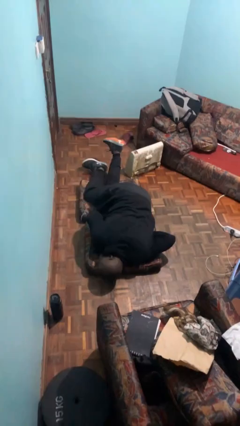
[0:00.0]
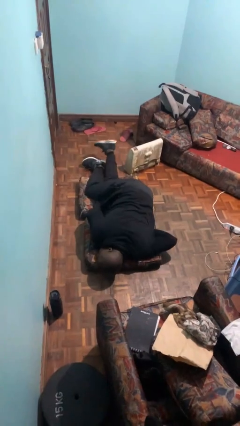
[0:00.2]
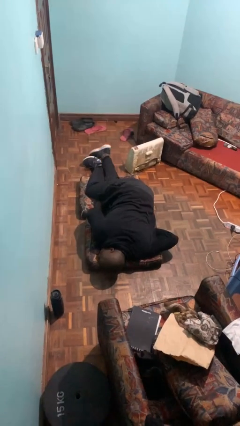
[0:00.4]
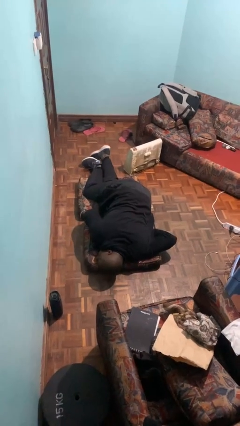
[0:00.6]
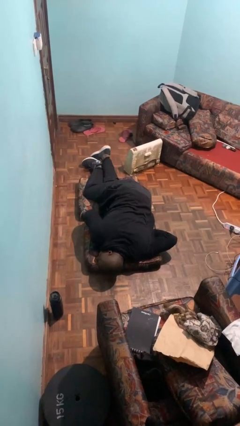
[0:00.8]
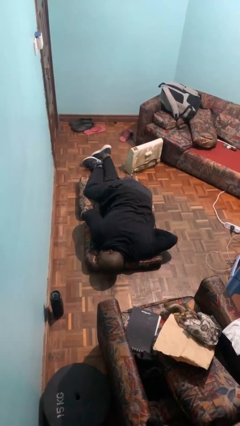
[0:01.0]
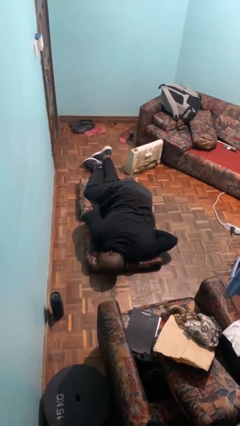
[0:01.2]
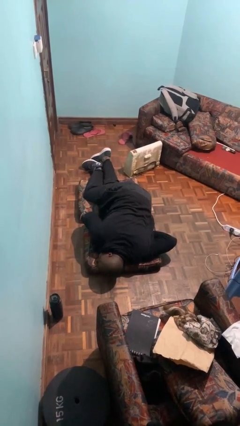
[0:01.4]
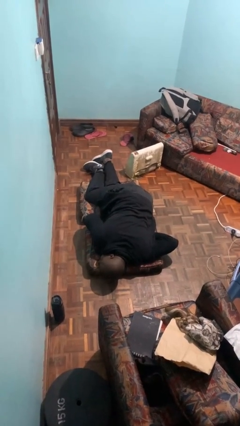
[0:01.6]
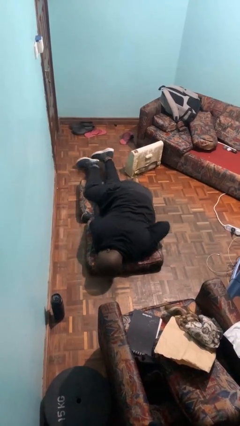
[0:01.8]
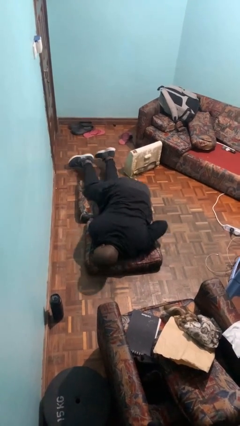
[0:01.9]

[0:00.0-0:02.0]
person lies down on floor

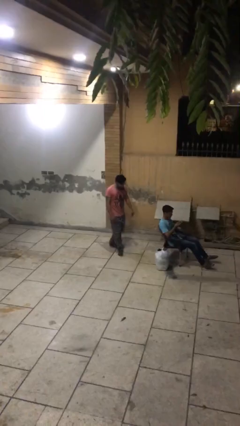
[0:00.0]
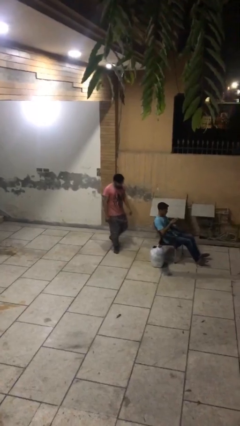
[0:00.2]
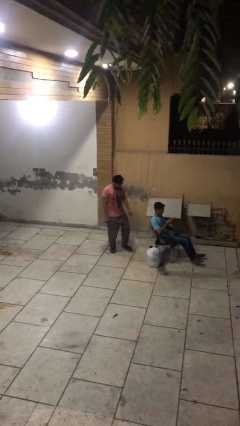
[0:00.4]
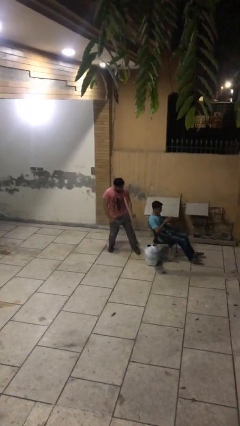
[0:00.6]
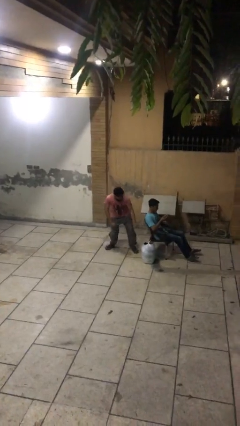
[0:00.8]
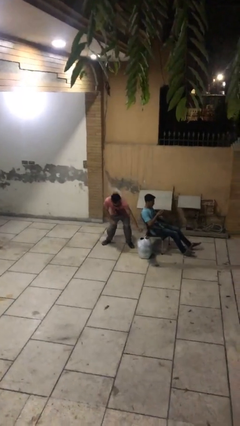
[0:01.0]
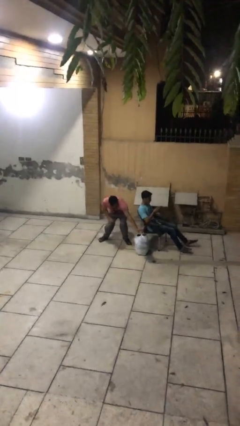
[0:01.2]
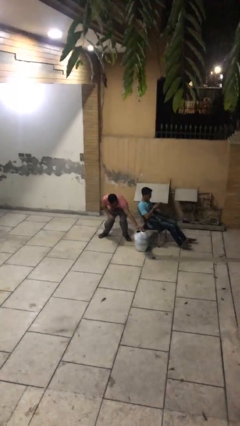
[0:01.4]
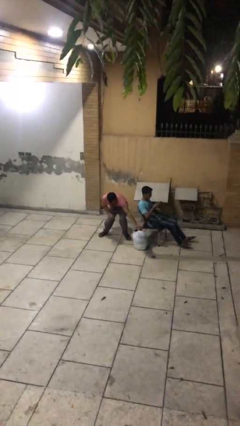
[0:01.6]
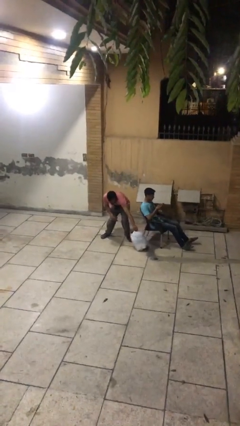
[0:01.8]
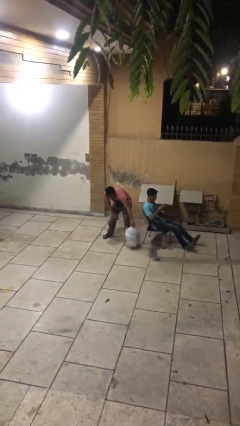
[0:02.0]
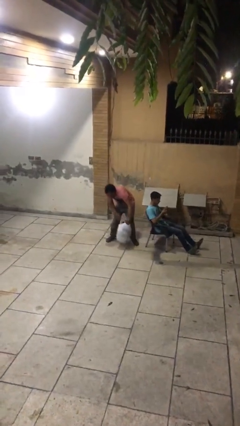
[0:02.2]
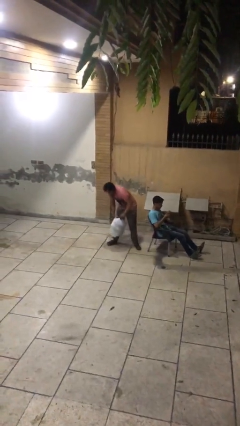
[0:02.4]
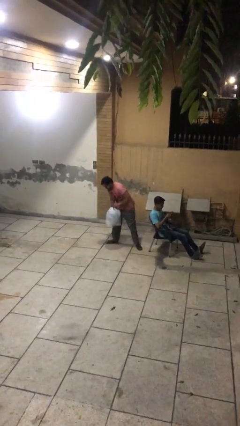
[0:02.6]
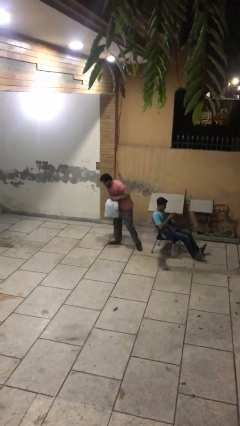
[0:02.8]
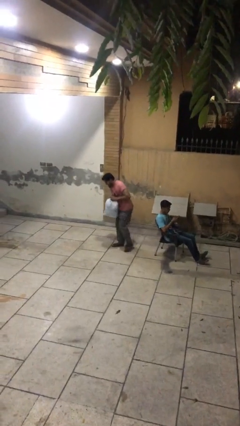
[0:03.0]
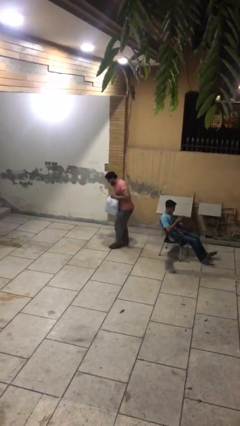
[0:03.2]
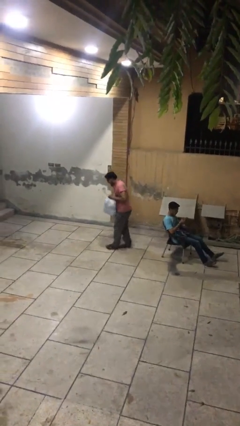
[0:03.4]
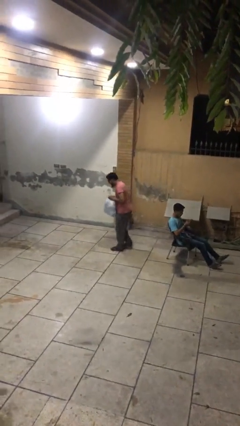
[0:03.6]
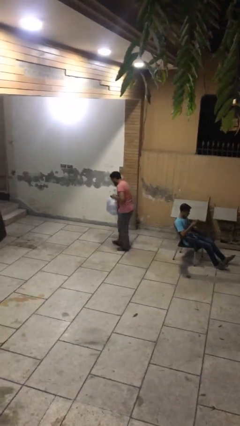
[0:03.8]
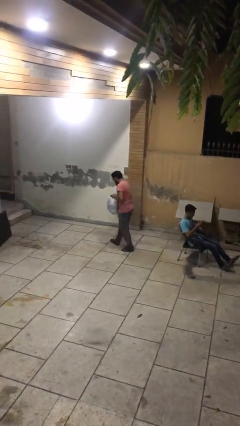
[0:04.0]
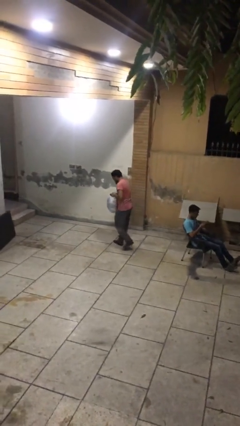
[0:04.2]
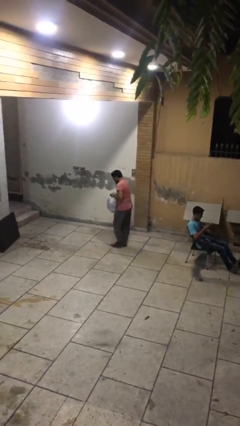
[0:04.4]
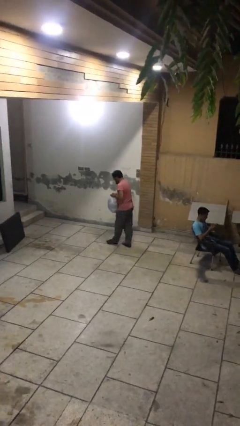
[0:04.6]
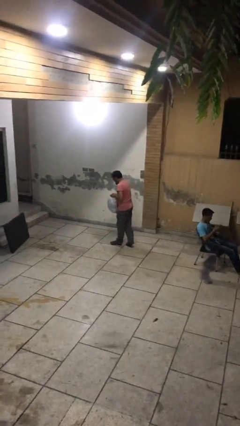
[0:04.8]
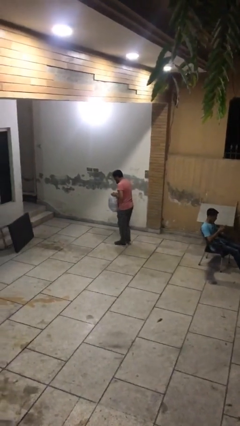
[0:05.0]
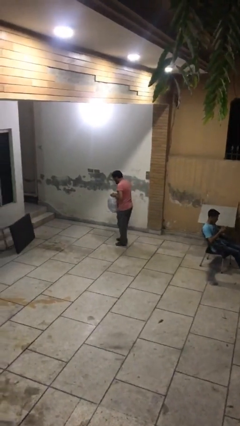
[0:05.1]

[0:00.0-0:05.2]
person steals object from person

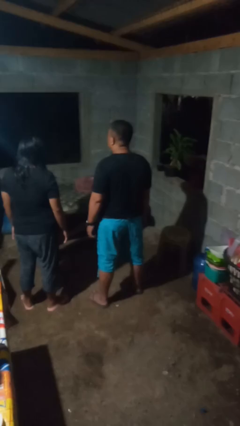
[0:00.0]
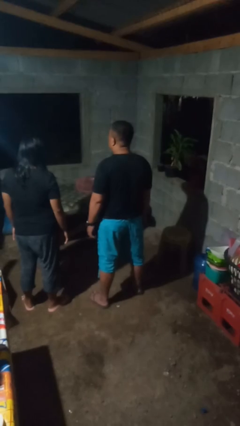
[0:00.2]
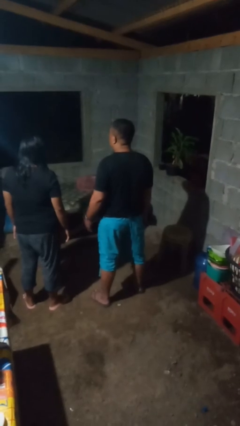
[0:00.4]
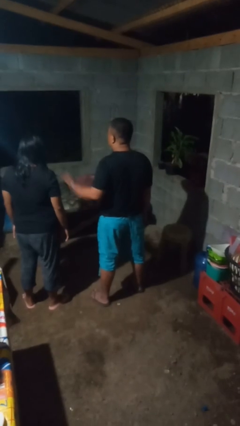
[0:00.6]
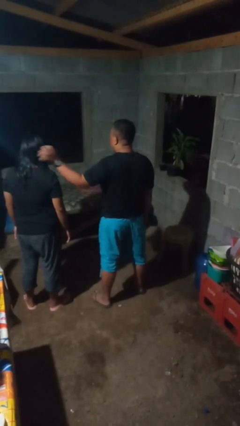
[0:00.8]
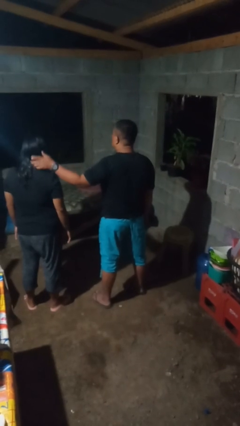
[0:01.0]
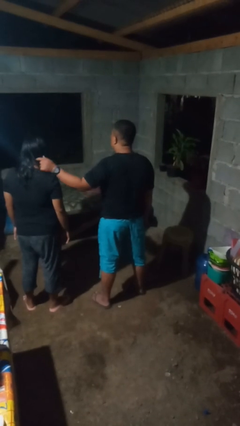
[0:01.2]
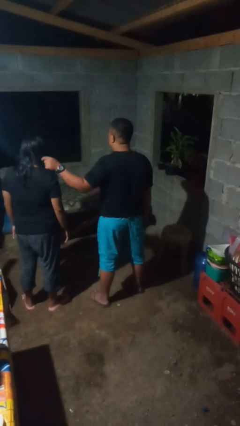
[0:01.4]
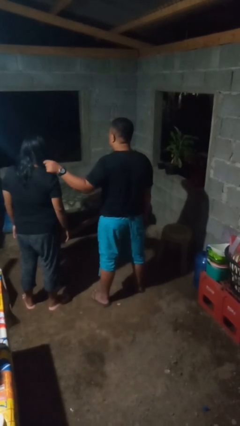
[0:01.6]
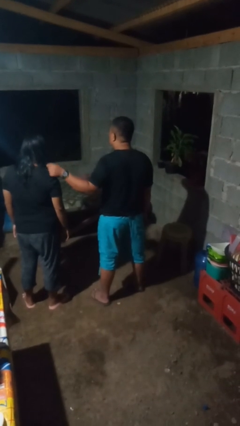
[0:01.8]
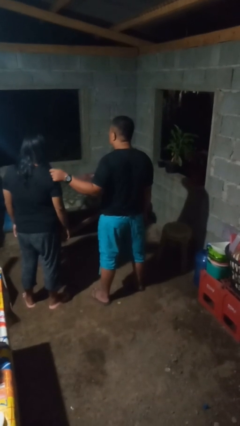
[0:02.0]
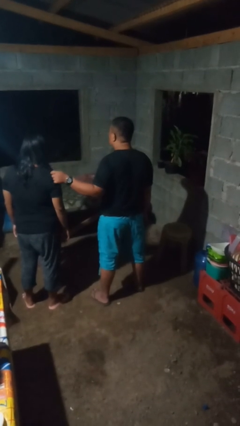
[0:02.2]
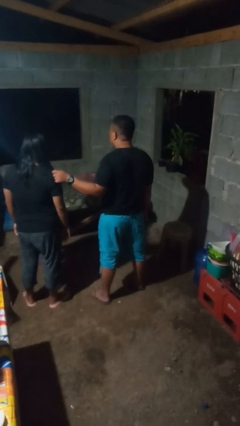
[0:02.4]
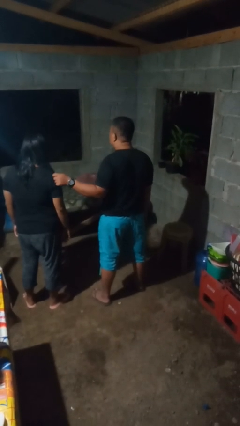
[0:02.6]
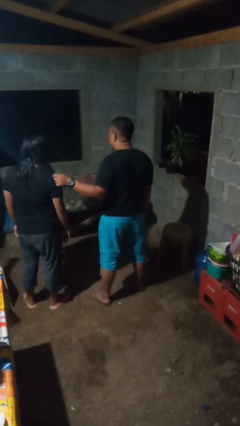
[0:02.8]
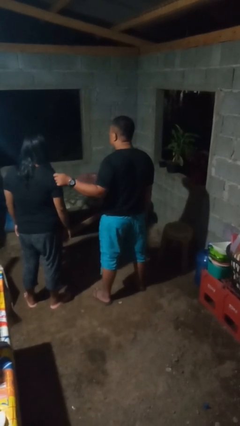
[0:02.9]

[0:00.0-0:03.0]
person grabs person by hair

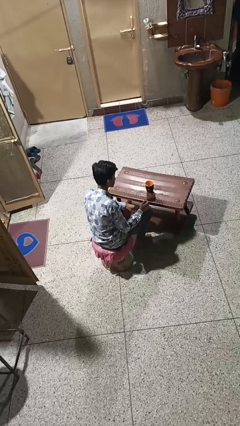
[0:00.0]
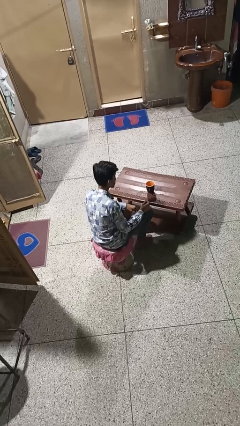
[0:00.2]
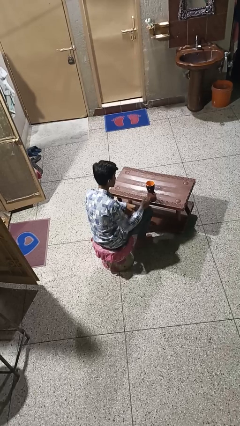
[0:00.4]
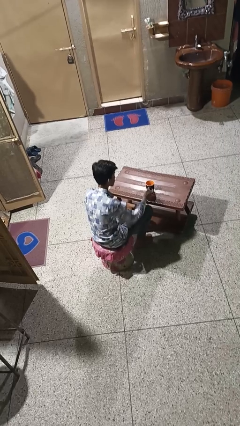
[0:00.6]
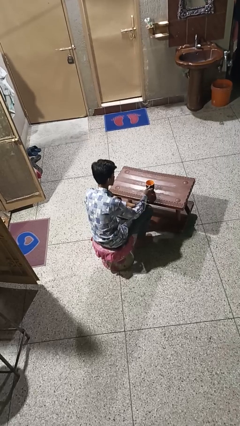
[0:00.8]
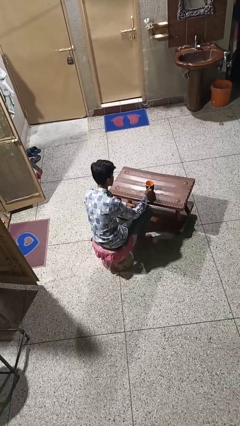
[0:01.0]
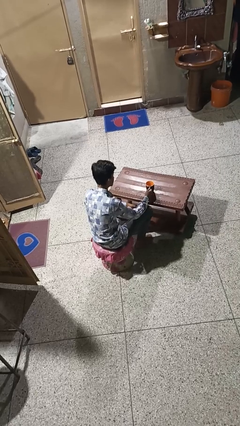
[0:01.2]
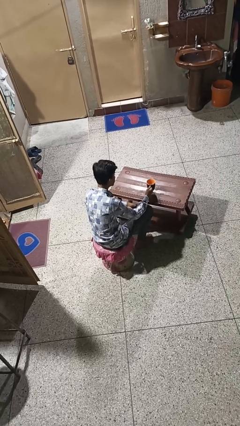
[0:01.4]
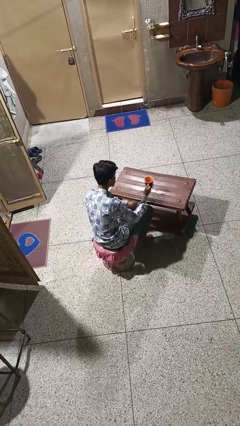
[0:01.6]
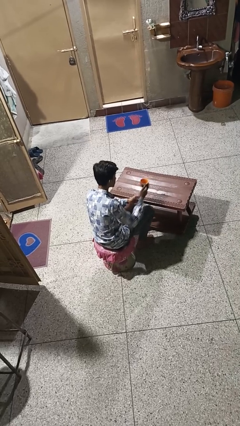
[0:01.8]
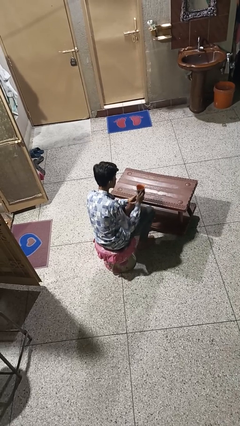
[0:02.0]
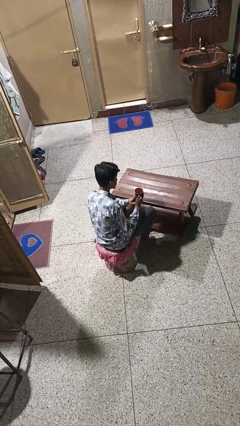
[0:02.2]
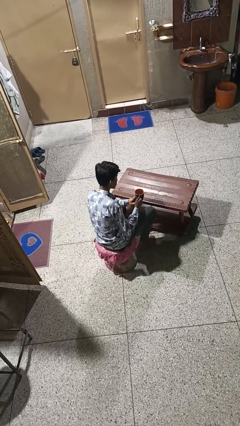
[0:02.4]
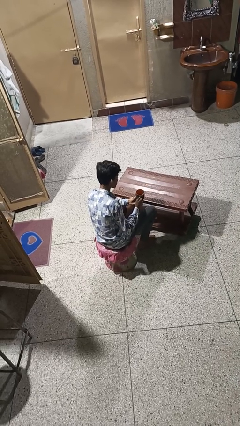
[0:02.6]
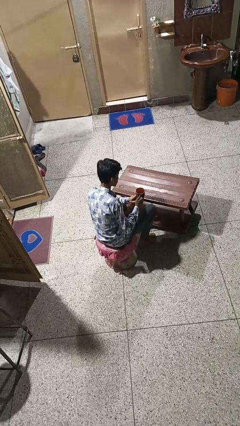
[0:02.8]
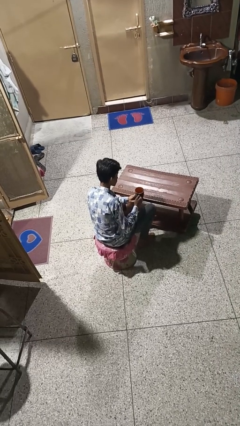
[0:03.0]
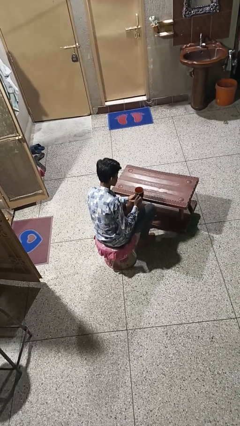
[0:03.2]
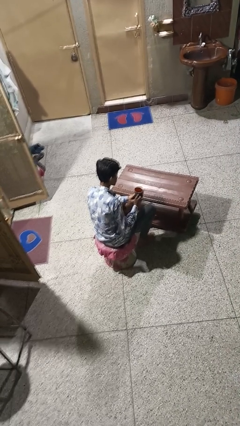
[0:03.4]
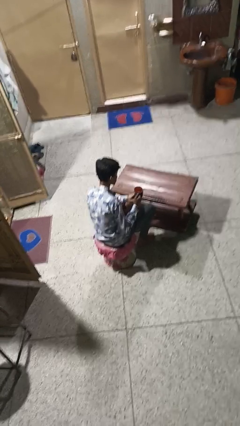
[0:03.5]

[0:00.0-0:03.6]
person picks up object from table

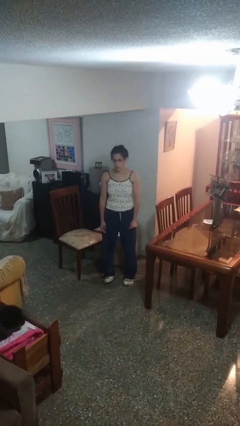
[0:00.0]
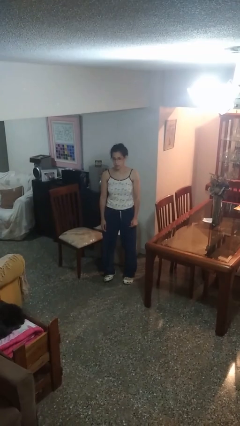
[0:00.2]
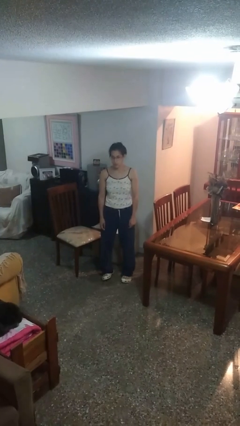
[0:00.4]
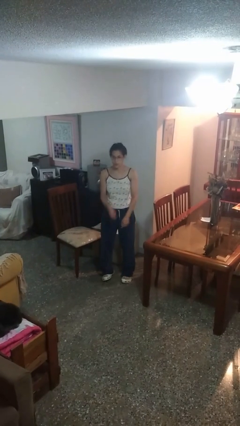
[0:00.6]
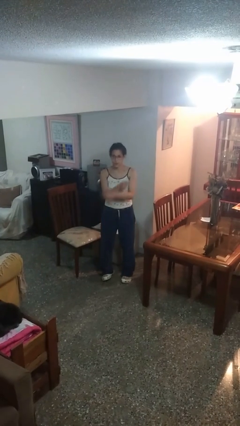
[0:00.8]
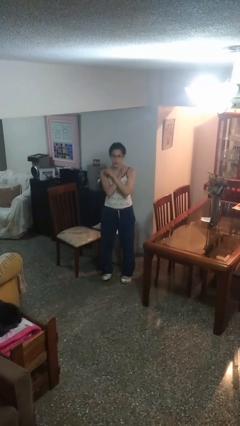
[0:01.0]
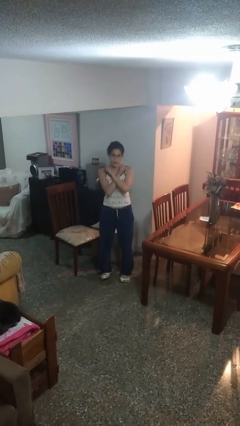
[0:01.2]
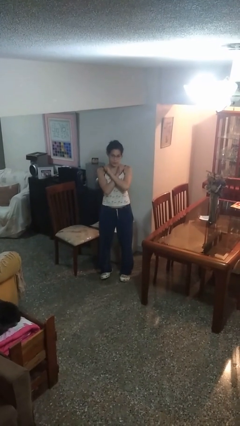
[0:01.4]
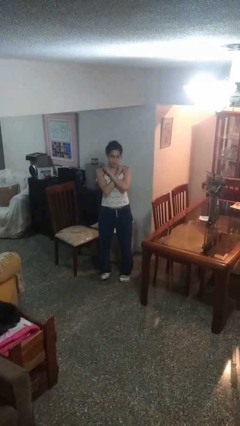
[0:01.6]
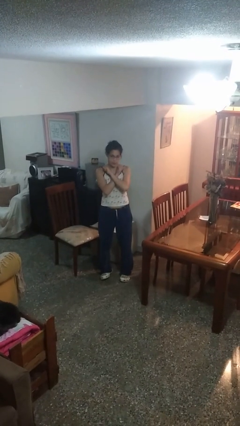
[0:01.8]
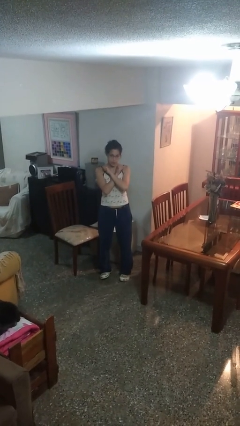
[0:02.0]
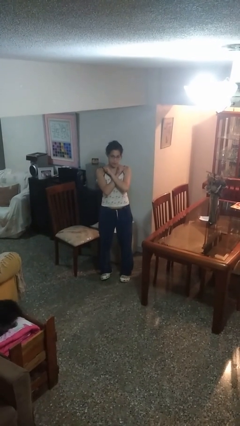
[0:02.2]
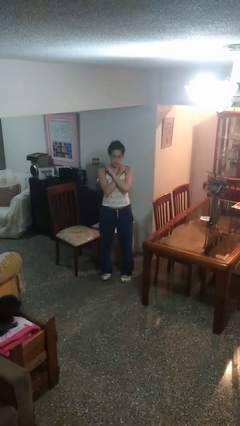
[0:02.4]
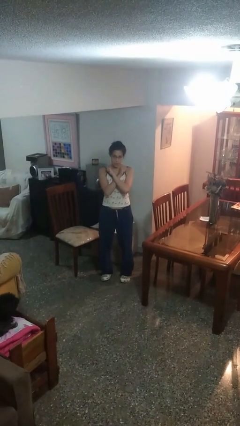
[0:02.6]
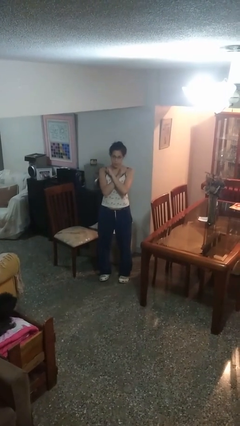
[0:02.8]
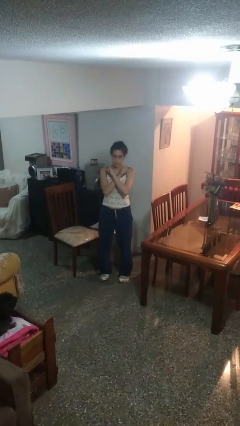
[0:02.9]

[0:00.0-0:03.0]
person gestures arms x

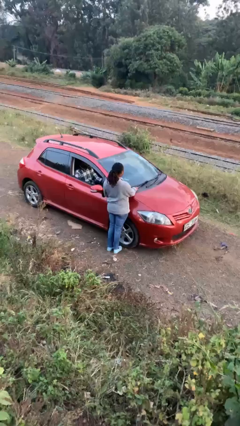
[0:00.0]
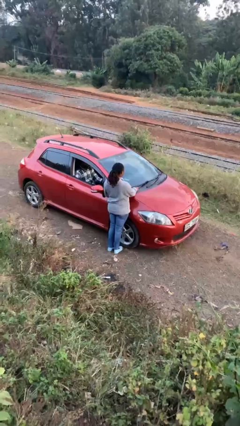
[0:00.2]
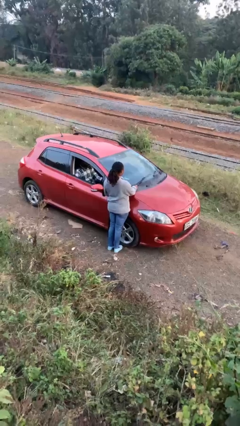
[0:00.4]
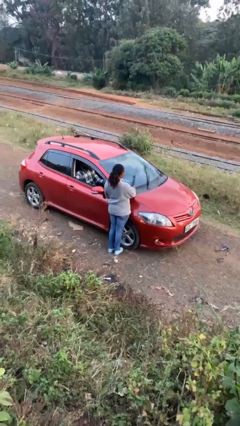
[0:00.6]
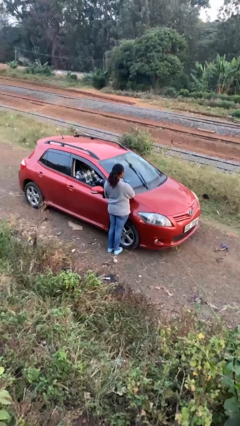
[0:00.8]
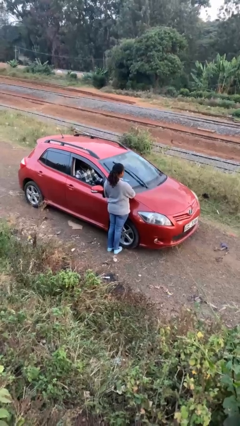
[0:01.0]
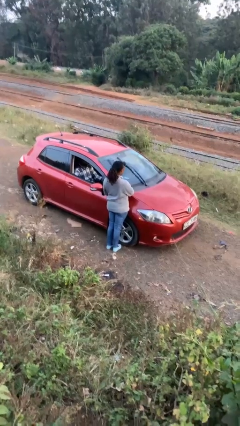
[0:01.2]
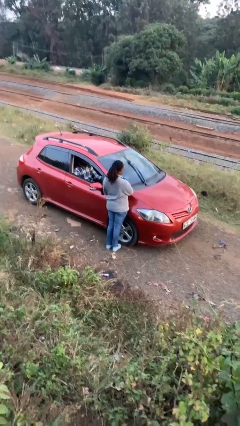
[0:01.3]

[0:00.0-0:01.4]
person flips up car wipers
